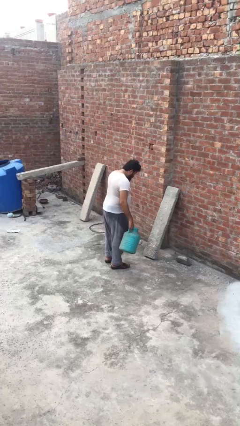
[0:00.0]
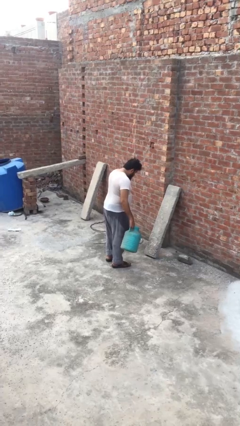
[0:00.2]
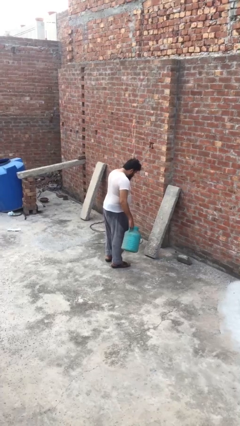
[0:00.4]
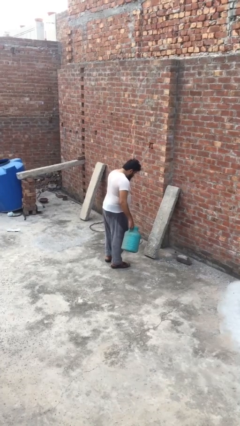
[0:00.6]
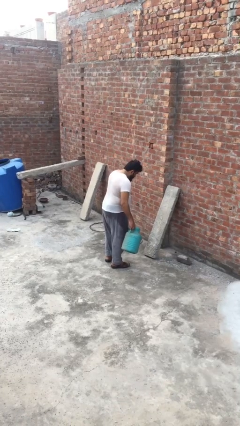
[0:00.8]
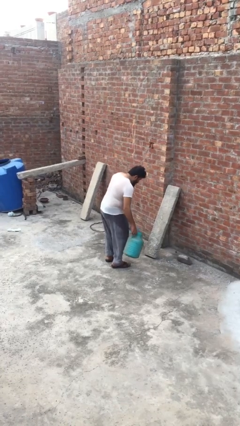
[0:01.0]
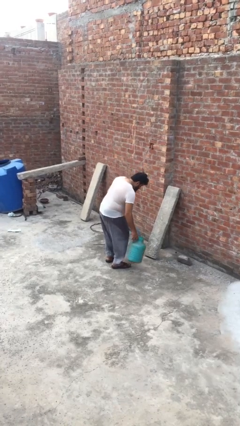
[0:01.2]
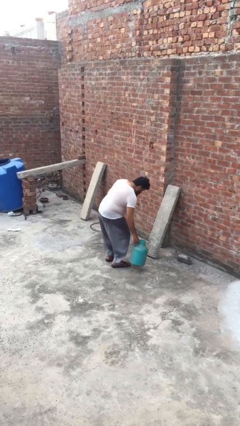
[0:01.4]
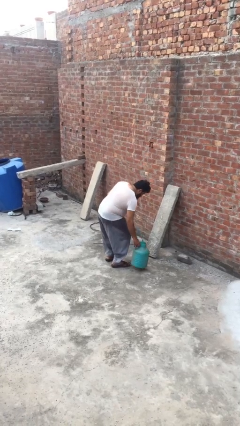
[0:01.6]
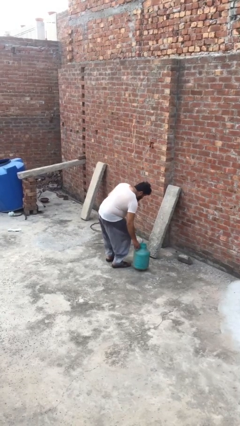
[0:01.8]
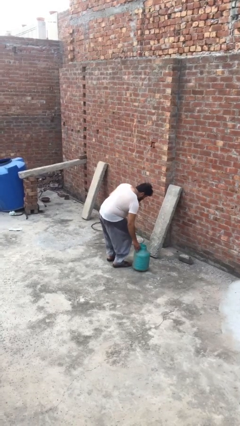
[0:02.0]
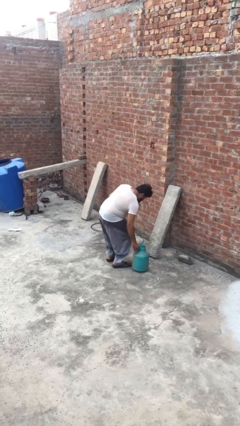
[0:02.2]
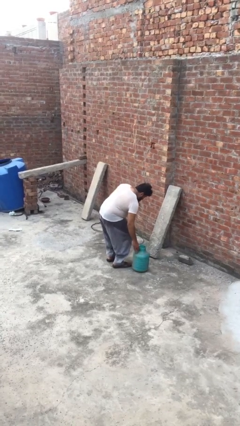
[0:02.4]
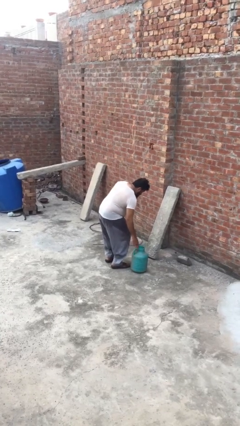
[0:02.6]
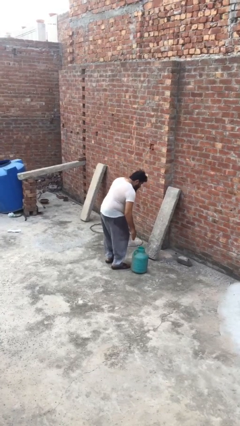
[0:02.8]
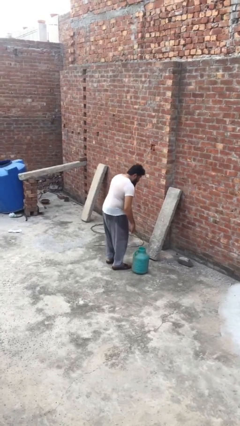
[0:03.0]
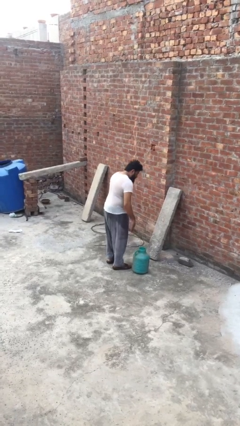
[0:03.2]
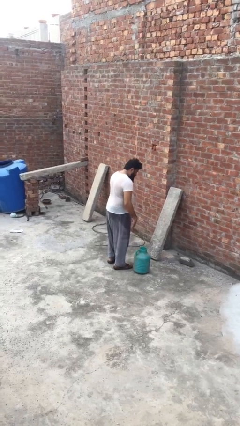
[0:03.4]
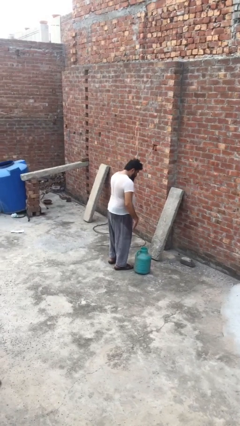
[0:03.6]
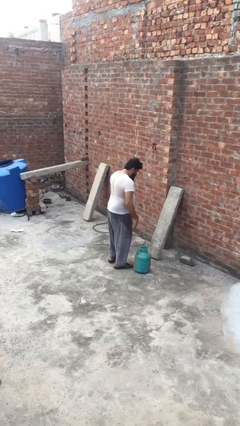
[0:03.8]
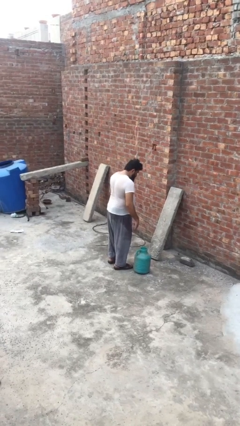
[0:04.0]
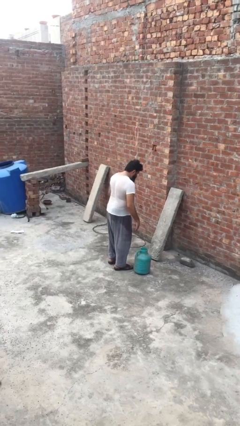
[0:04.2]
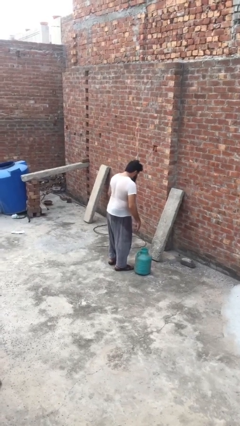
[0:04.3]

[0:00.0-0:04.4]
person puts down object on floor

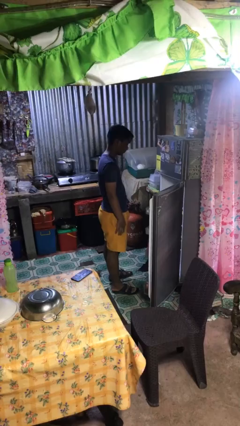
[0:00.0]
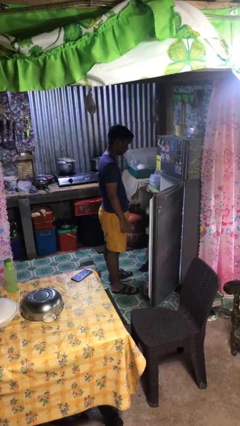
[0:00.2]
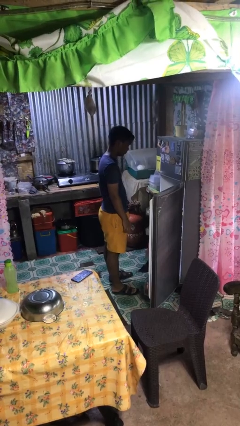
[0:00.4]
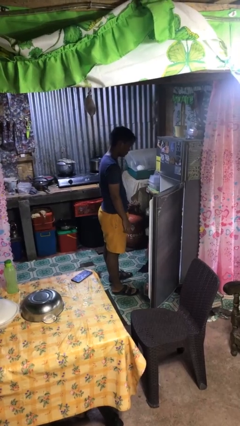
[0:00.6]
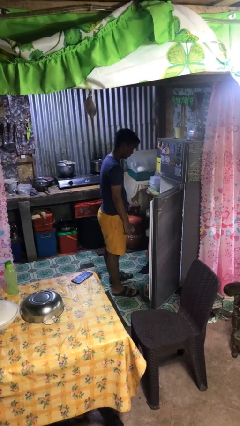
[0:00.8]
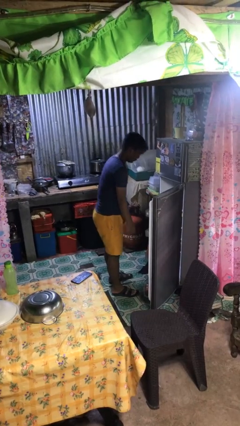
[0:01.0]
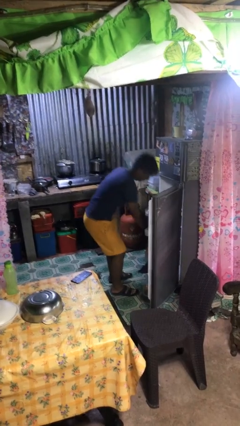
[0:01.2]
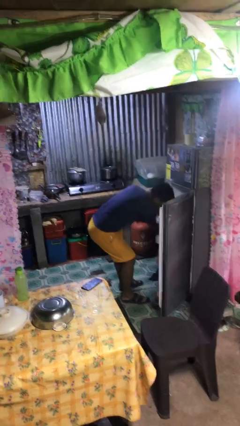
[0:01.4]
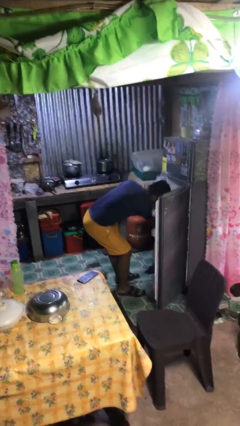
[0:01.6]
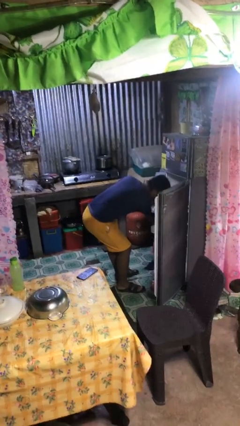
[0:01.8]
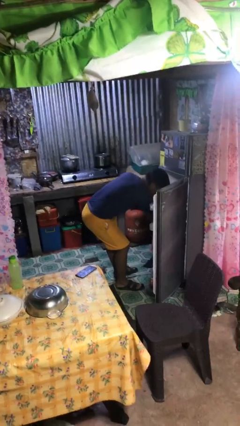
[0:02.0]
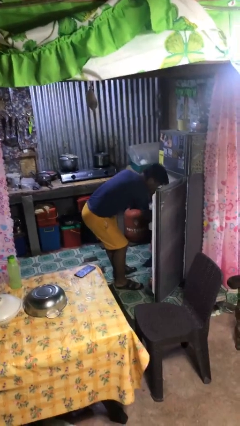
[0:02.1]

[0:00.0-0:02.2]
person puts object into refrigerator

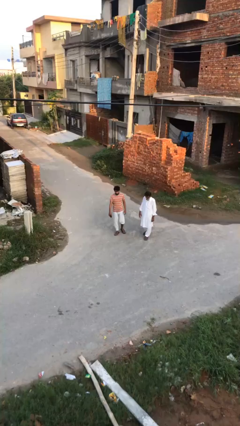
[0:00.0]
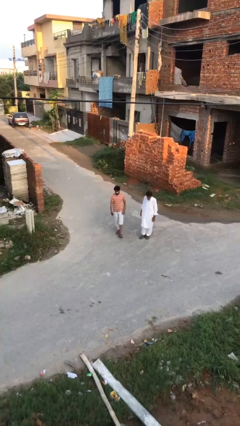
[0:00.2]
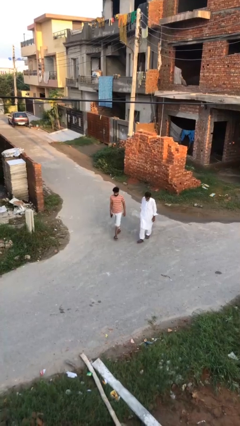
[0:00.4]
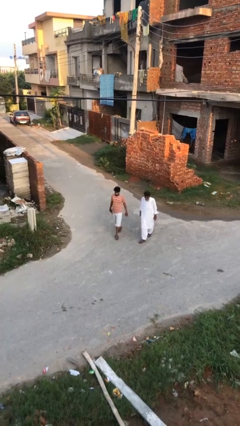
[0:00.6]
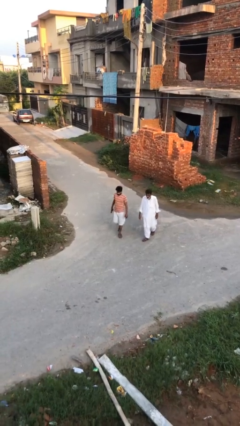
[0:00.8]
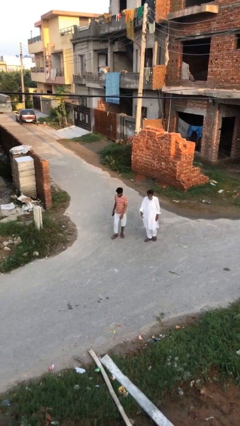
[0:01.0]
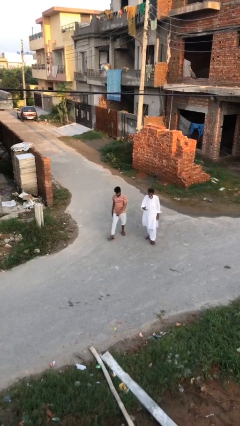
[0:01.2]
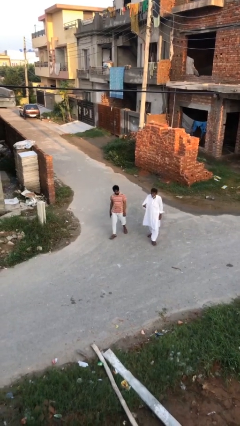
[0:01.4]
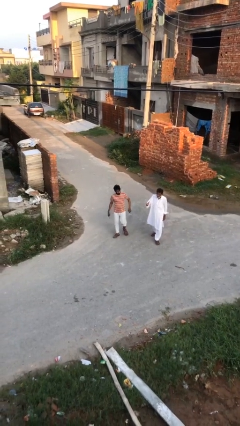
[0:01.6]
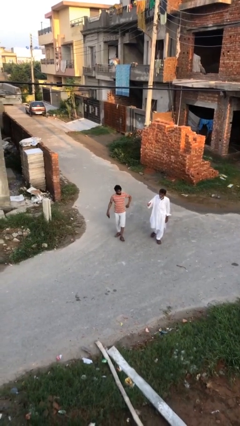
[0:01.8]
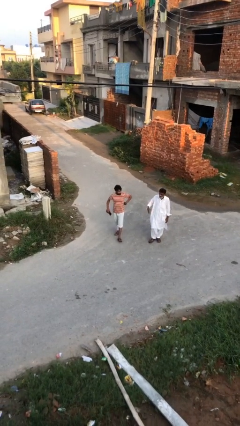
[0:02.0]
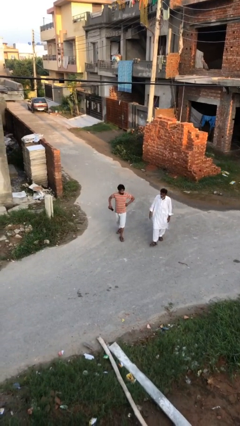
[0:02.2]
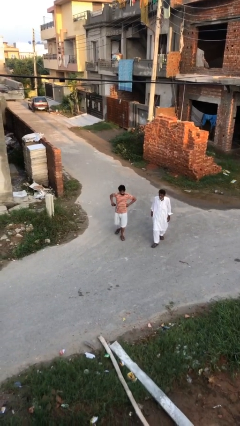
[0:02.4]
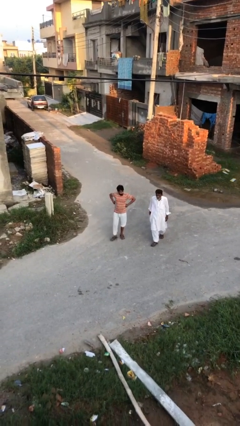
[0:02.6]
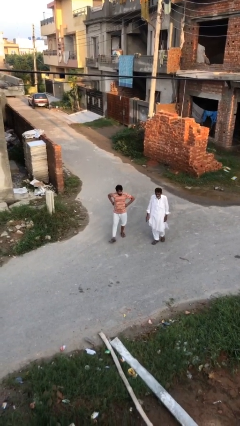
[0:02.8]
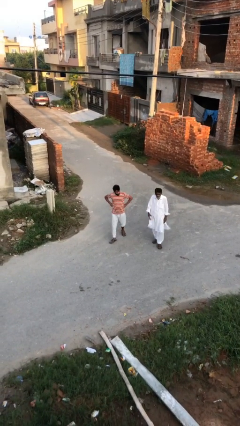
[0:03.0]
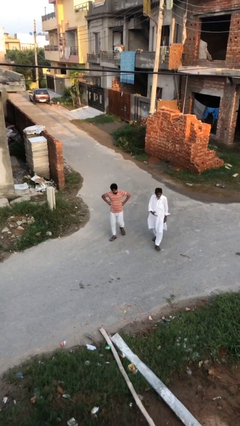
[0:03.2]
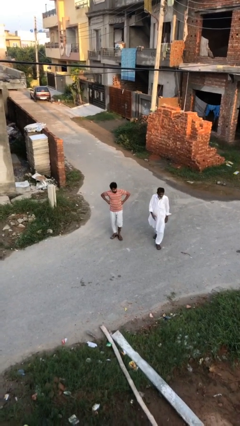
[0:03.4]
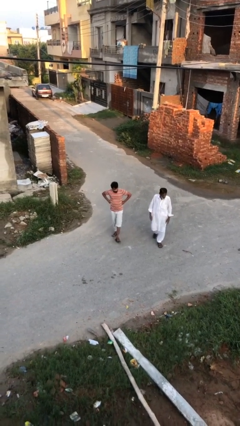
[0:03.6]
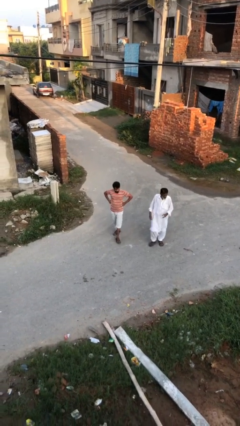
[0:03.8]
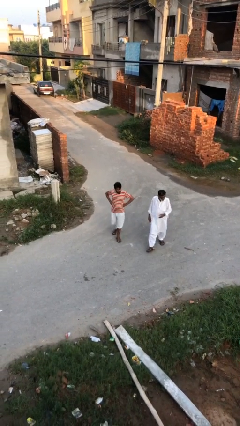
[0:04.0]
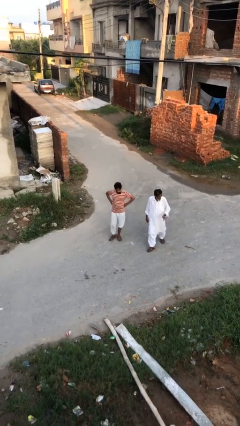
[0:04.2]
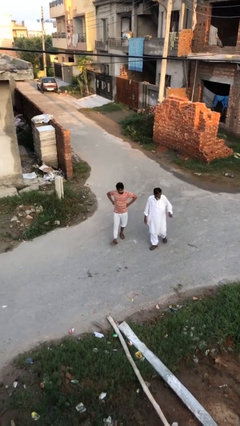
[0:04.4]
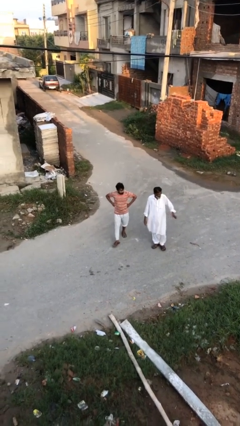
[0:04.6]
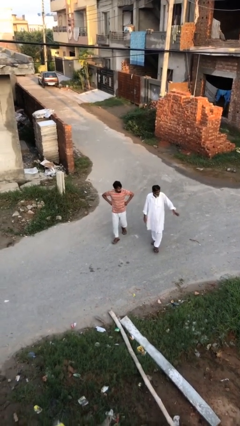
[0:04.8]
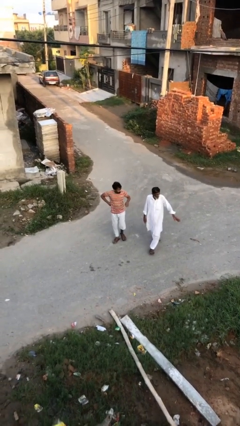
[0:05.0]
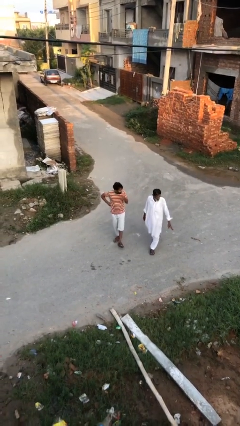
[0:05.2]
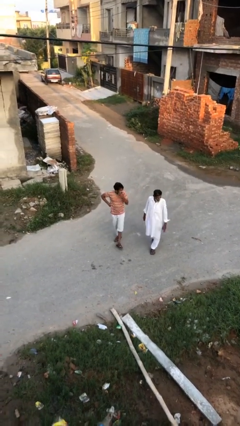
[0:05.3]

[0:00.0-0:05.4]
person talks to person

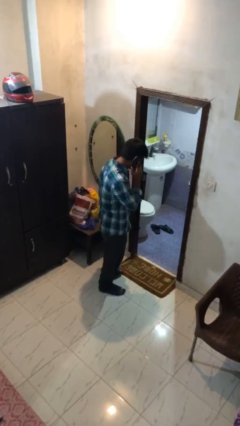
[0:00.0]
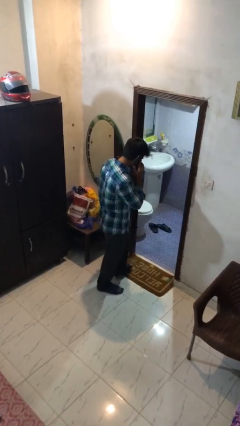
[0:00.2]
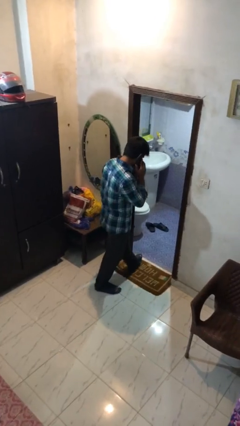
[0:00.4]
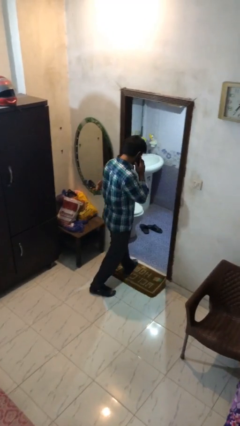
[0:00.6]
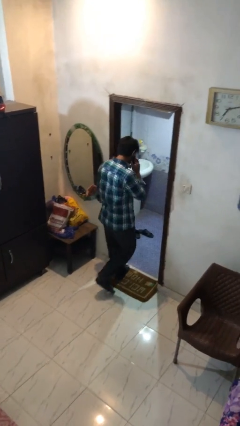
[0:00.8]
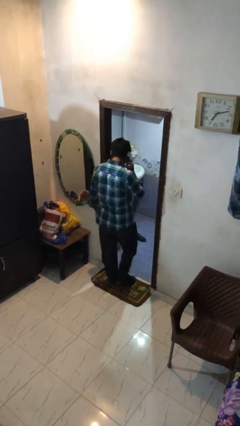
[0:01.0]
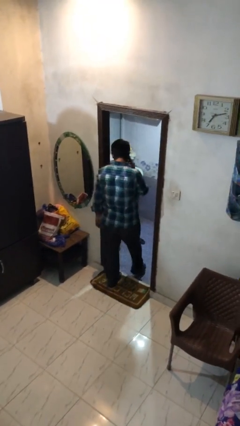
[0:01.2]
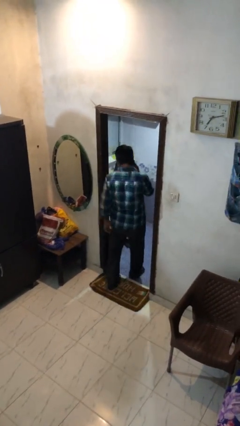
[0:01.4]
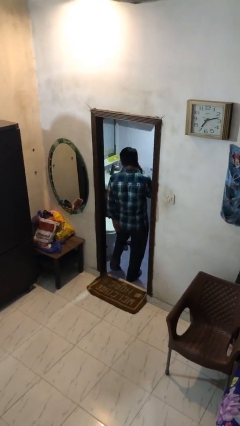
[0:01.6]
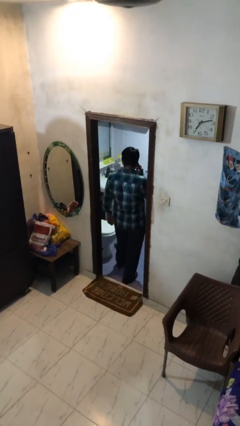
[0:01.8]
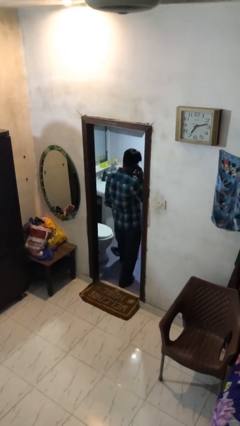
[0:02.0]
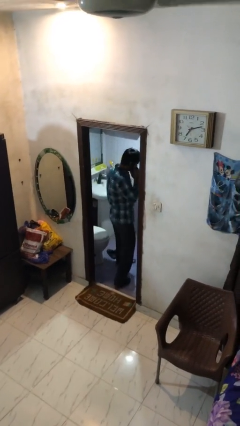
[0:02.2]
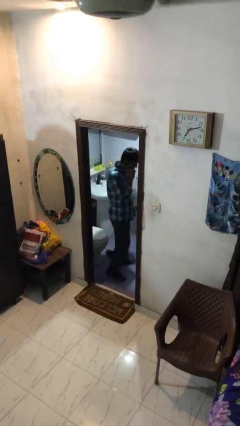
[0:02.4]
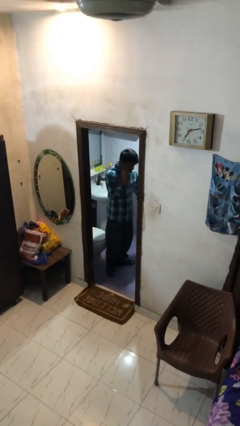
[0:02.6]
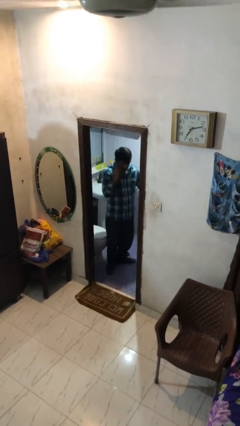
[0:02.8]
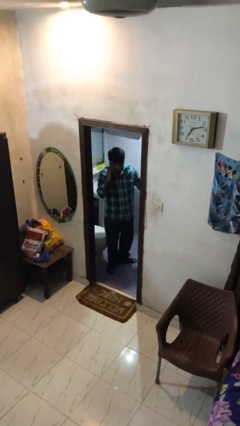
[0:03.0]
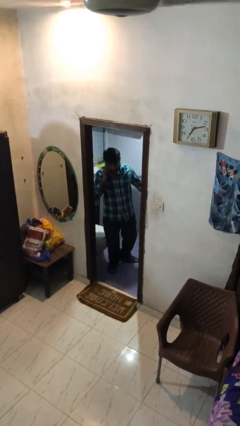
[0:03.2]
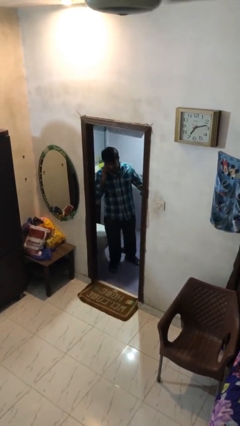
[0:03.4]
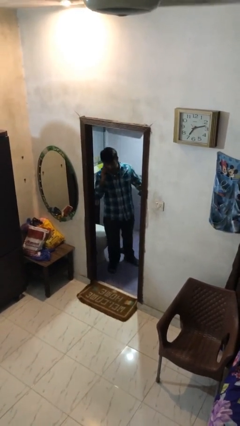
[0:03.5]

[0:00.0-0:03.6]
person exits scene through structure

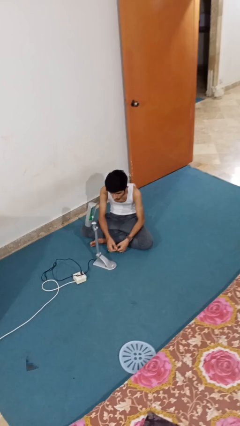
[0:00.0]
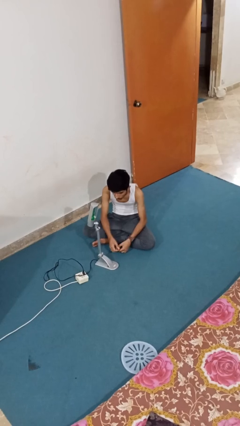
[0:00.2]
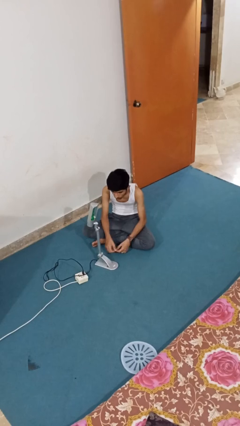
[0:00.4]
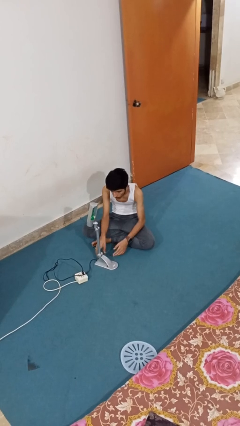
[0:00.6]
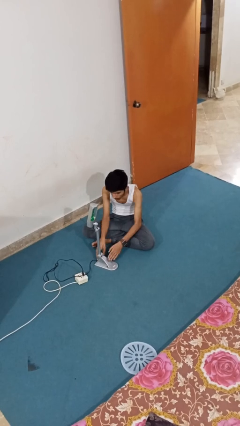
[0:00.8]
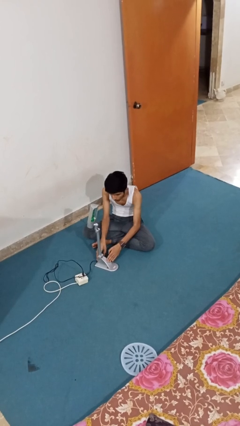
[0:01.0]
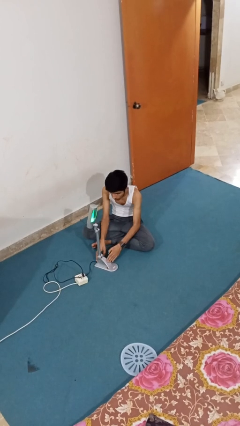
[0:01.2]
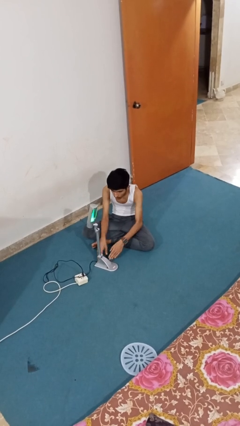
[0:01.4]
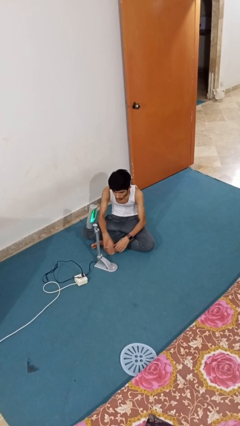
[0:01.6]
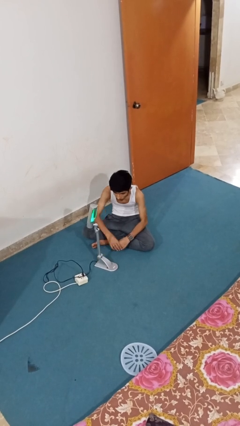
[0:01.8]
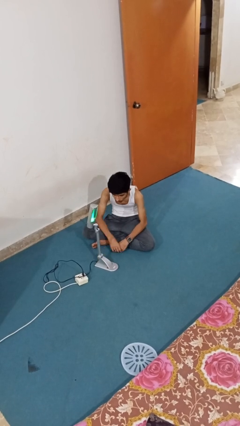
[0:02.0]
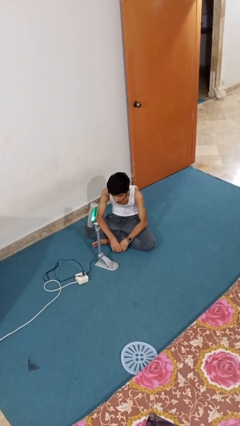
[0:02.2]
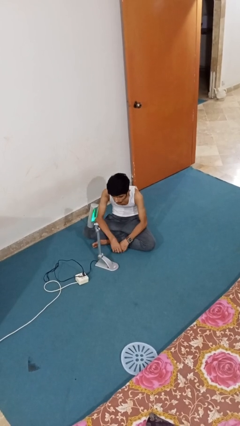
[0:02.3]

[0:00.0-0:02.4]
person turns on lamp
